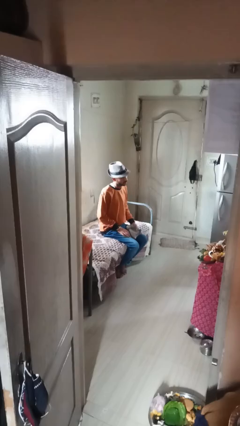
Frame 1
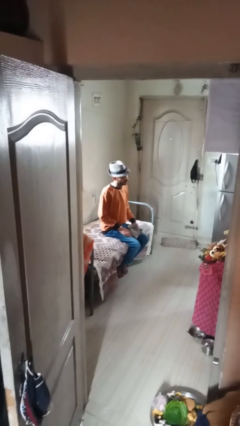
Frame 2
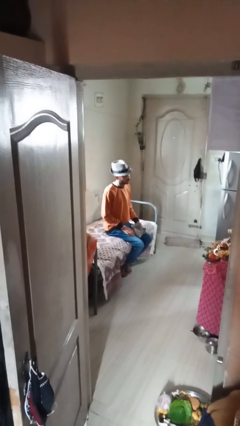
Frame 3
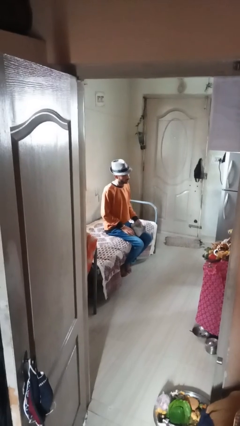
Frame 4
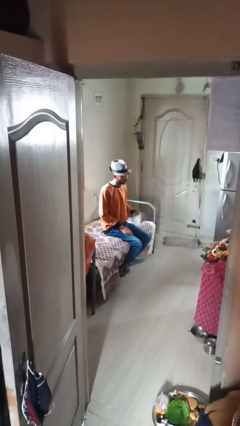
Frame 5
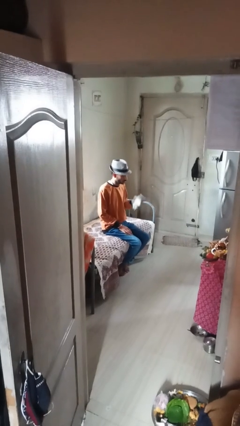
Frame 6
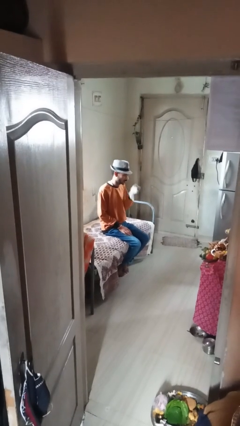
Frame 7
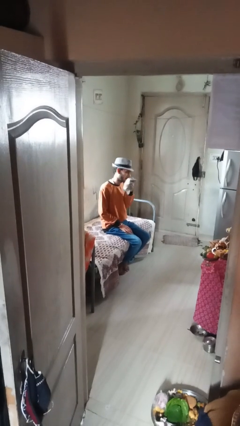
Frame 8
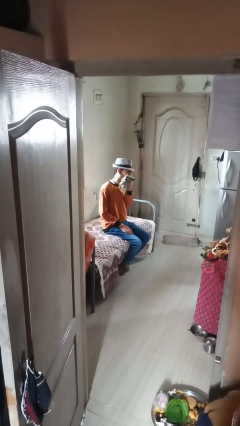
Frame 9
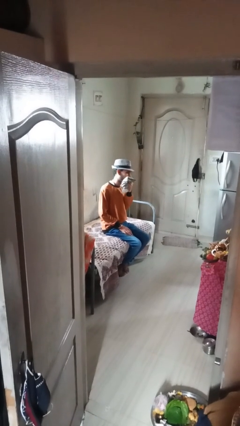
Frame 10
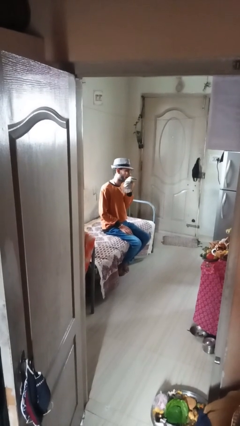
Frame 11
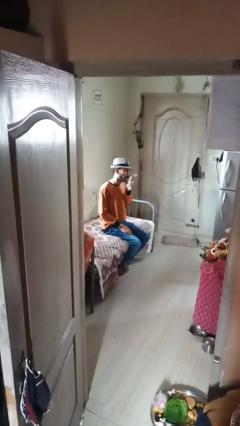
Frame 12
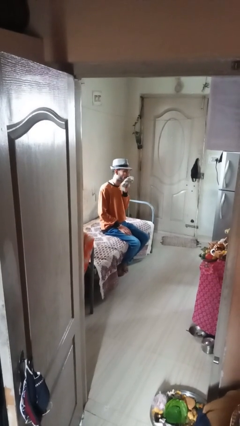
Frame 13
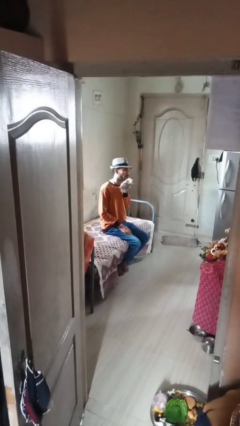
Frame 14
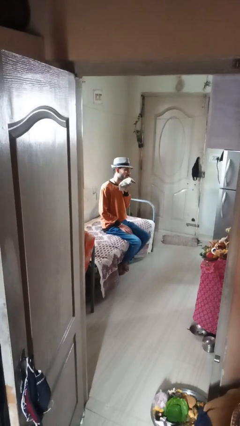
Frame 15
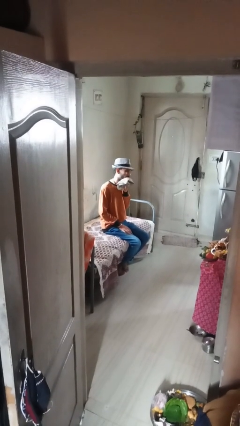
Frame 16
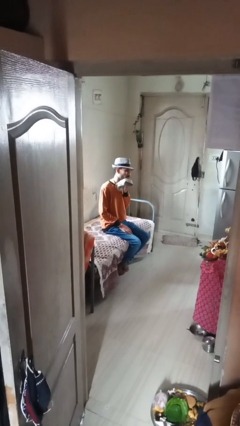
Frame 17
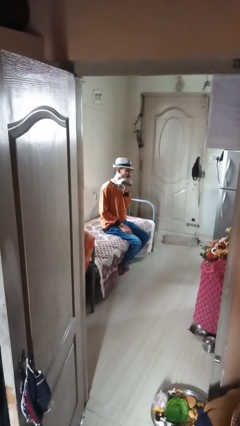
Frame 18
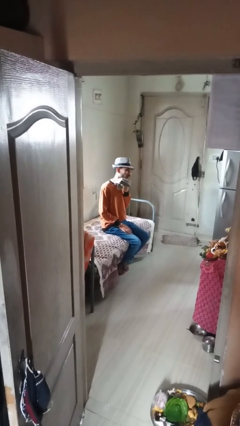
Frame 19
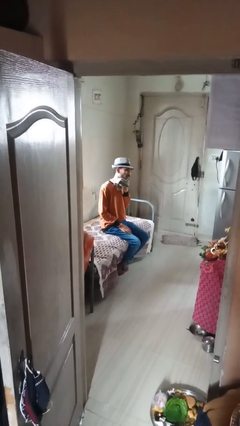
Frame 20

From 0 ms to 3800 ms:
person wipes mouth with napkin

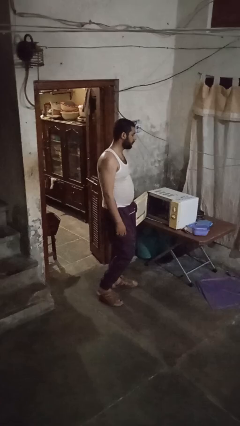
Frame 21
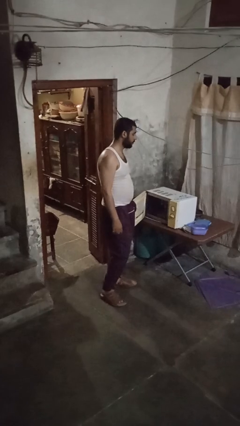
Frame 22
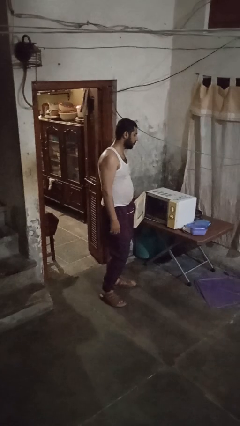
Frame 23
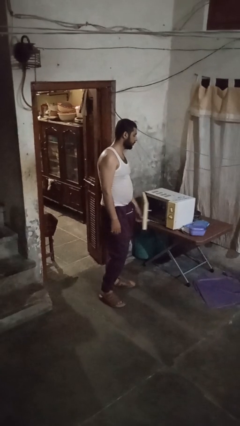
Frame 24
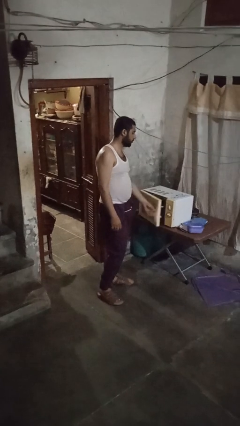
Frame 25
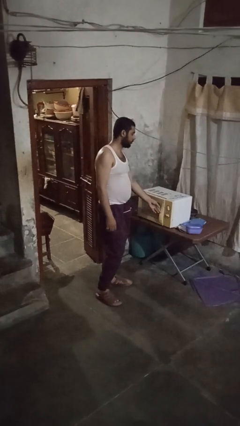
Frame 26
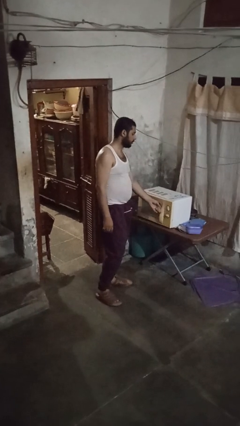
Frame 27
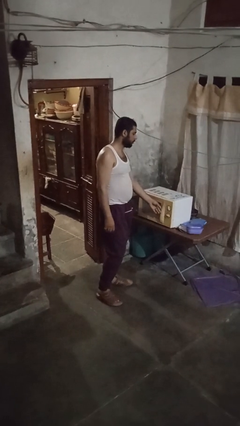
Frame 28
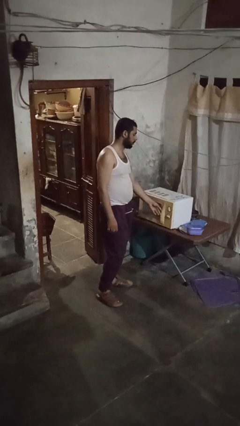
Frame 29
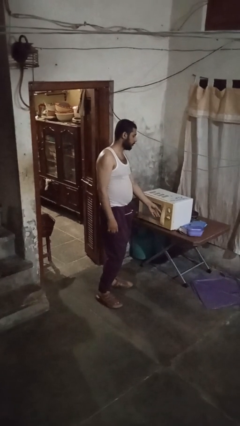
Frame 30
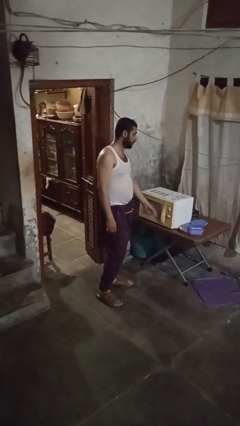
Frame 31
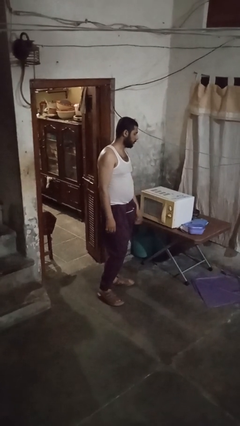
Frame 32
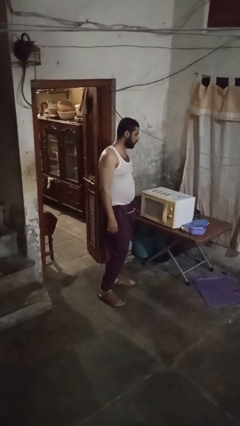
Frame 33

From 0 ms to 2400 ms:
person closes microwave

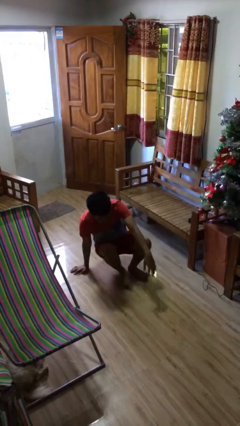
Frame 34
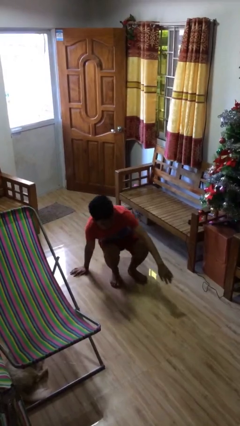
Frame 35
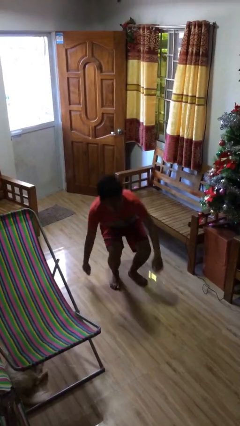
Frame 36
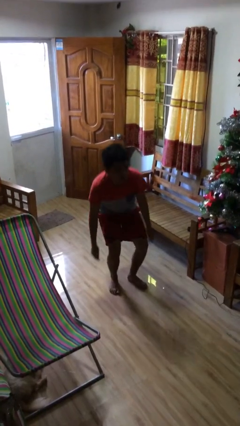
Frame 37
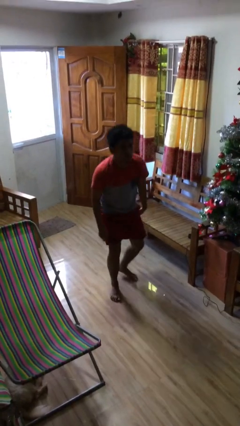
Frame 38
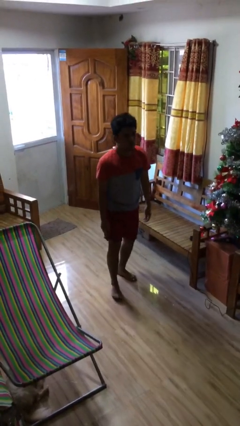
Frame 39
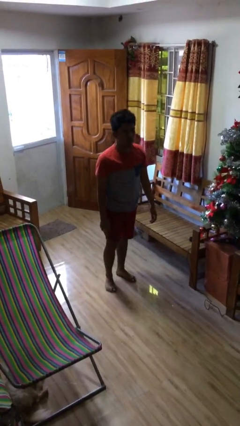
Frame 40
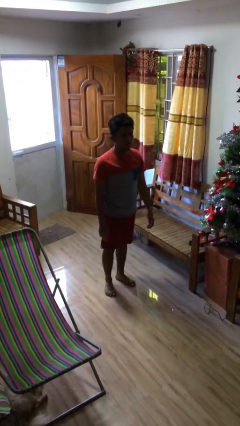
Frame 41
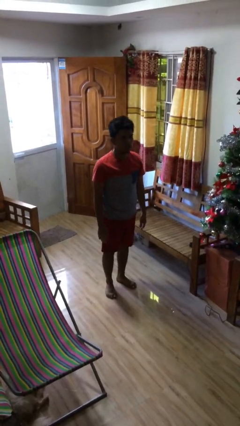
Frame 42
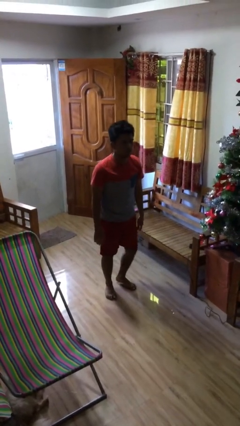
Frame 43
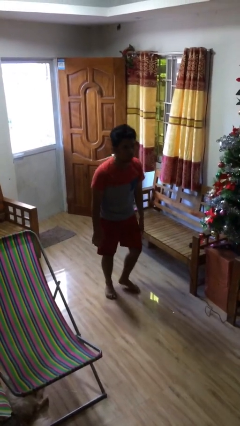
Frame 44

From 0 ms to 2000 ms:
person stands up

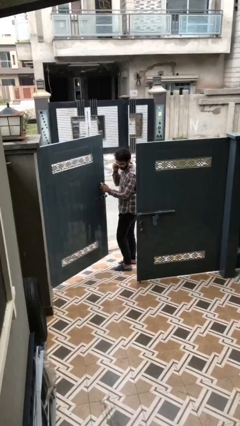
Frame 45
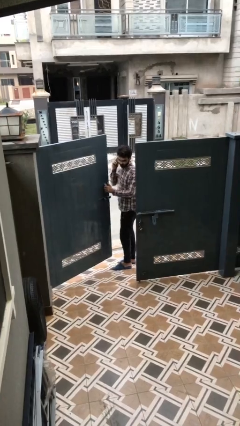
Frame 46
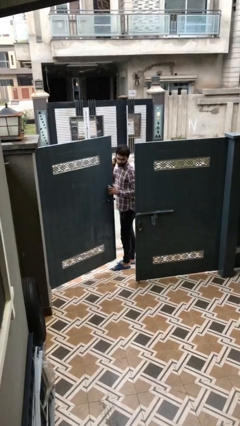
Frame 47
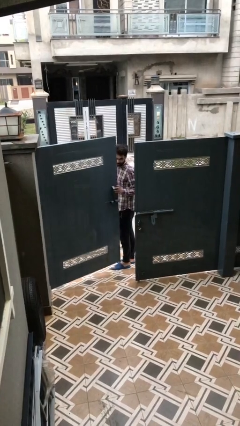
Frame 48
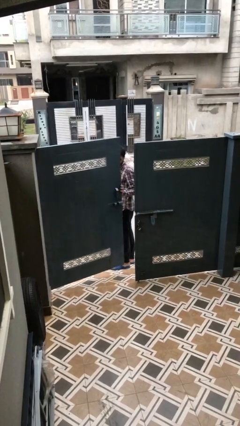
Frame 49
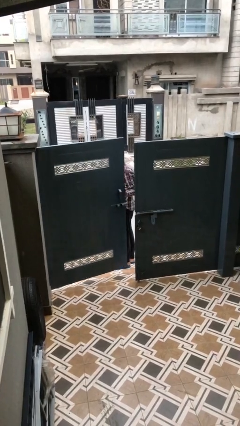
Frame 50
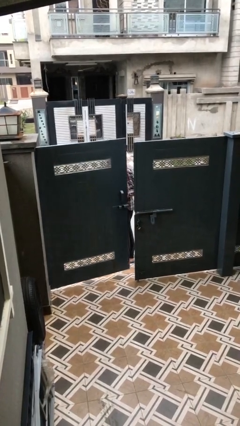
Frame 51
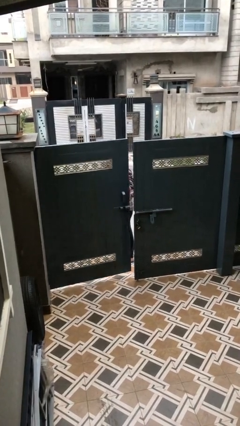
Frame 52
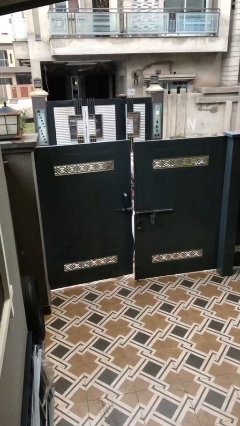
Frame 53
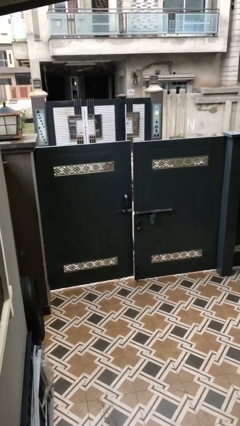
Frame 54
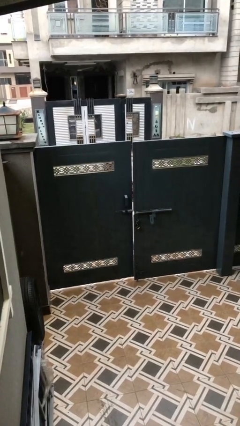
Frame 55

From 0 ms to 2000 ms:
person closes facility door

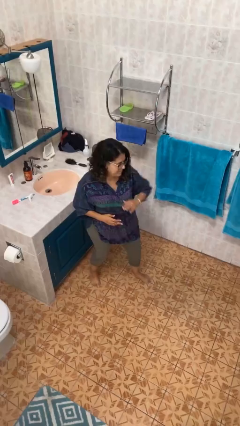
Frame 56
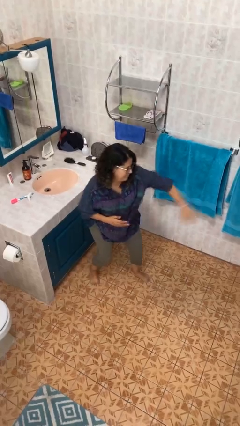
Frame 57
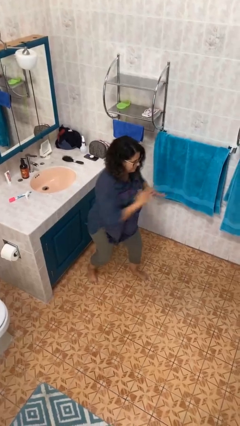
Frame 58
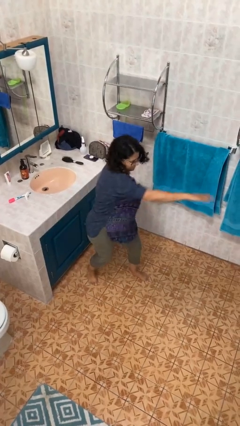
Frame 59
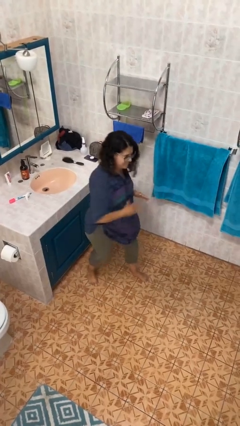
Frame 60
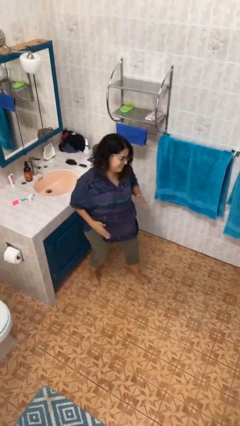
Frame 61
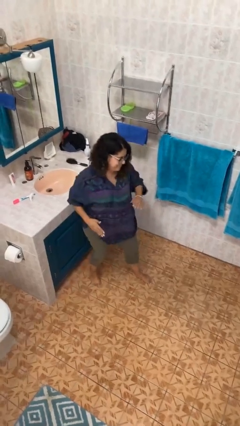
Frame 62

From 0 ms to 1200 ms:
person karate chop

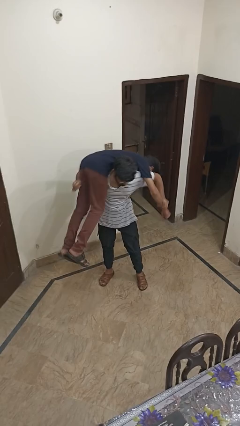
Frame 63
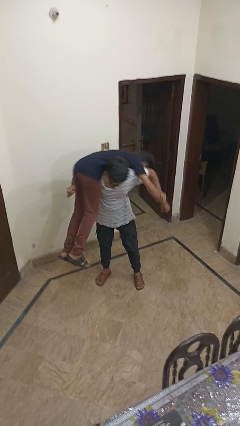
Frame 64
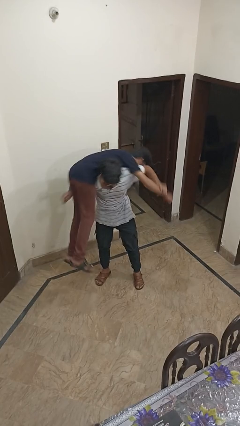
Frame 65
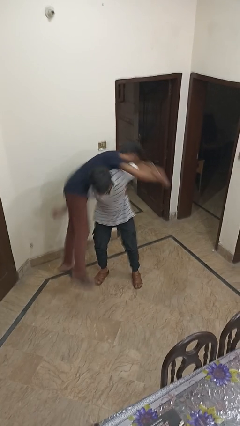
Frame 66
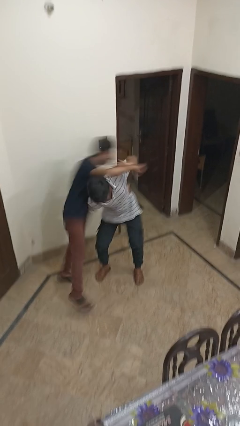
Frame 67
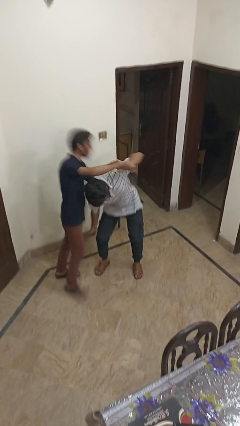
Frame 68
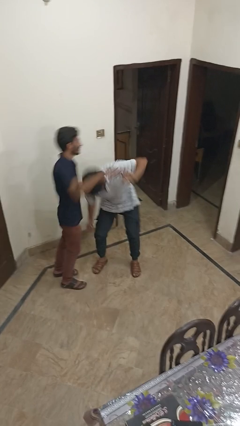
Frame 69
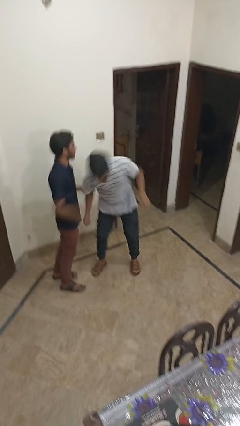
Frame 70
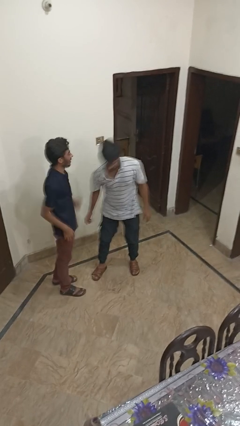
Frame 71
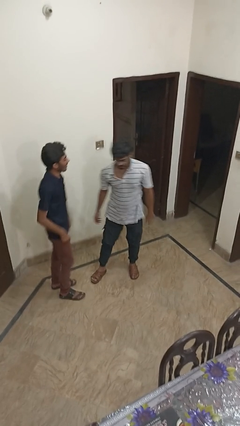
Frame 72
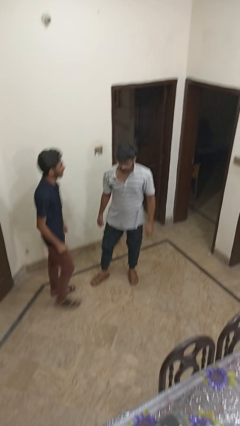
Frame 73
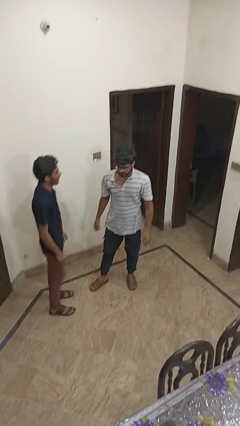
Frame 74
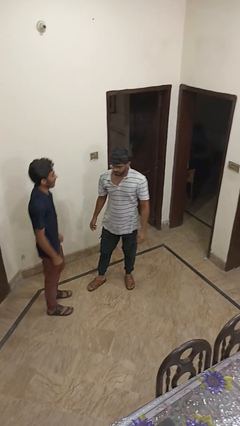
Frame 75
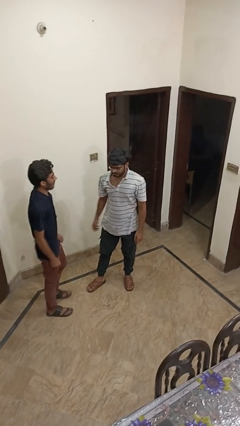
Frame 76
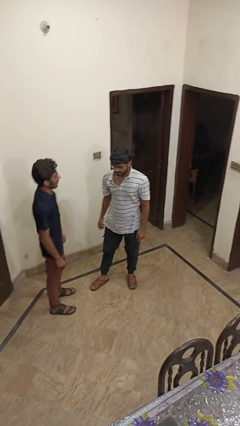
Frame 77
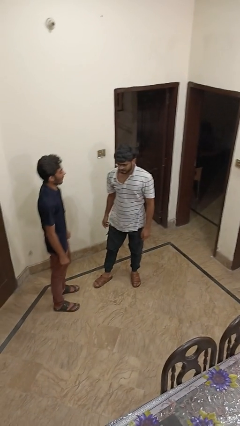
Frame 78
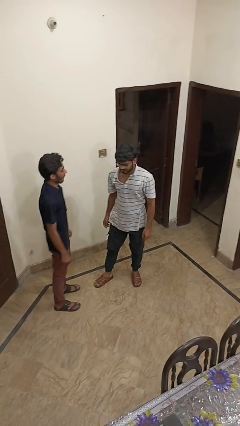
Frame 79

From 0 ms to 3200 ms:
person puts down person

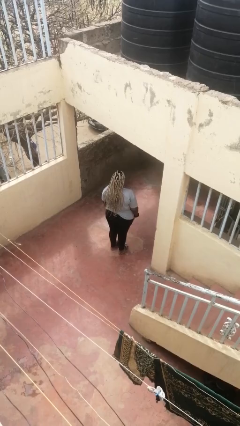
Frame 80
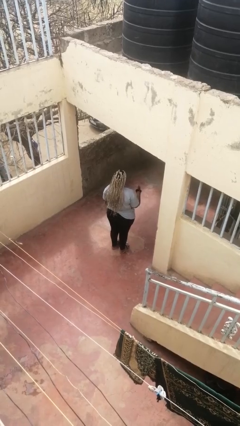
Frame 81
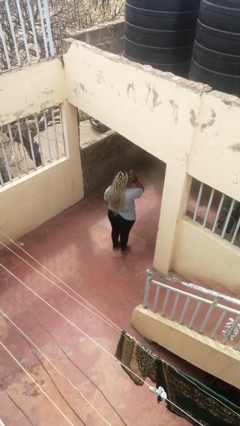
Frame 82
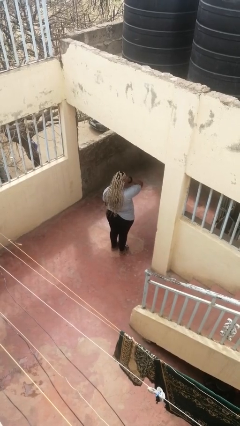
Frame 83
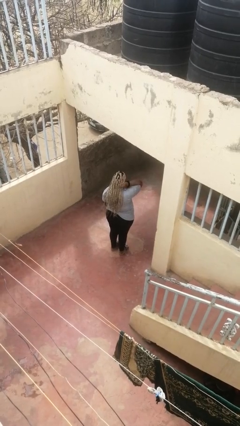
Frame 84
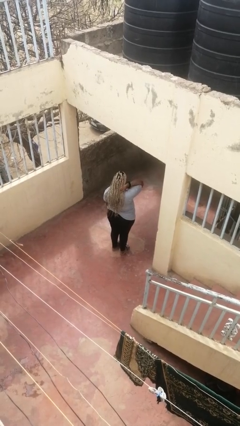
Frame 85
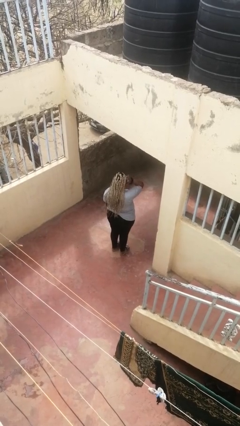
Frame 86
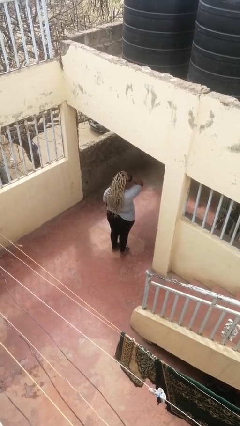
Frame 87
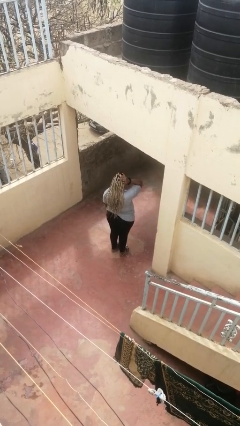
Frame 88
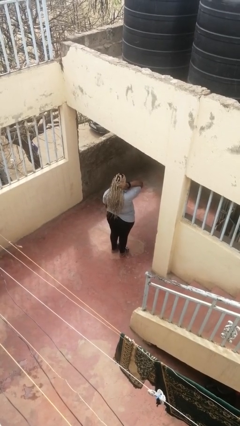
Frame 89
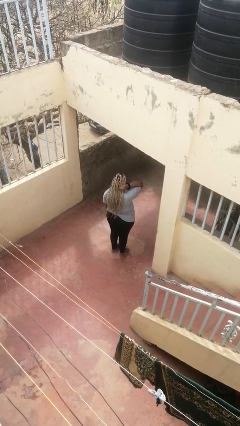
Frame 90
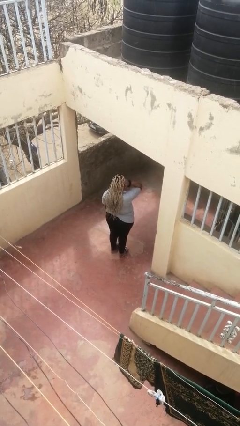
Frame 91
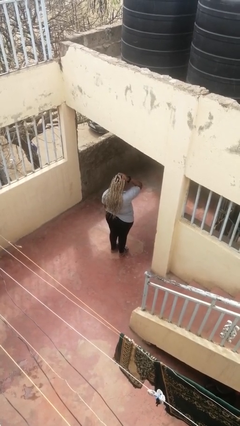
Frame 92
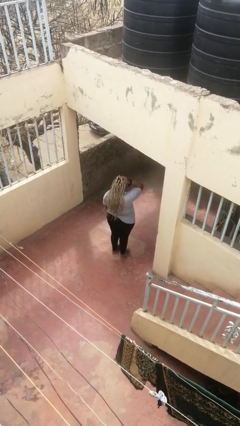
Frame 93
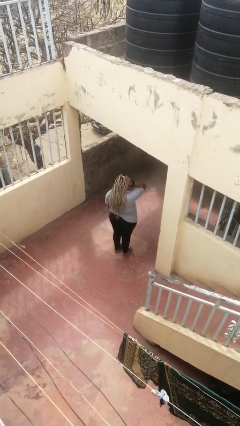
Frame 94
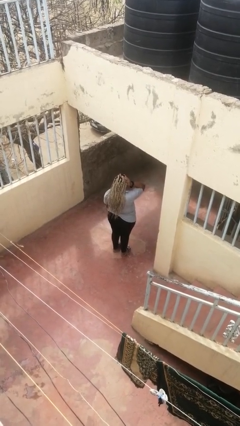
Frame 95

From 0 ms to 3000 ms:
person strokes hair
